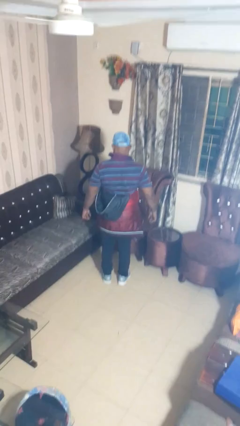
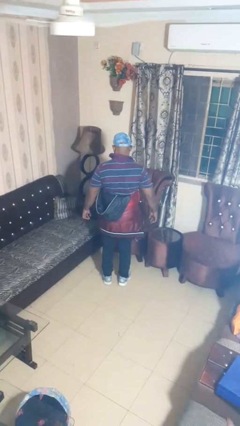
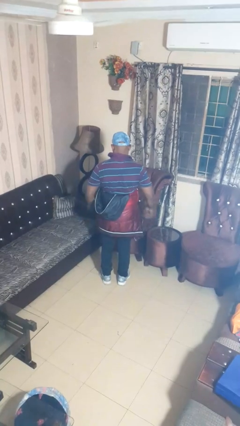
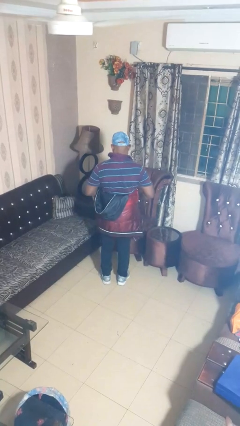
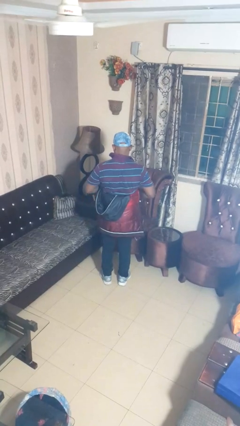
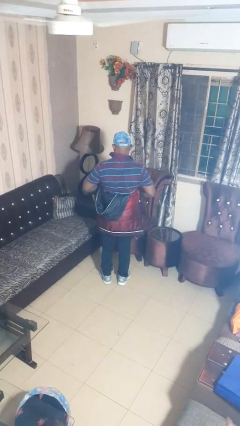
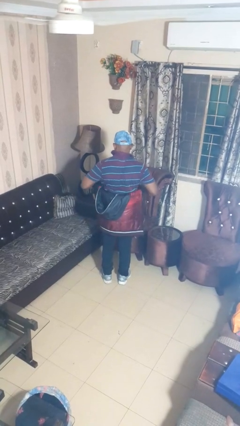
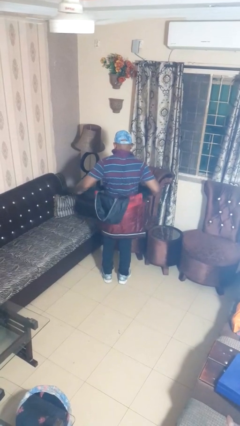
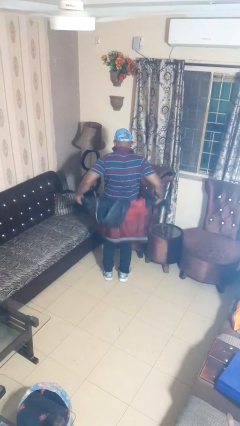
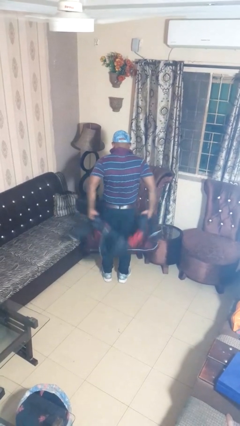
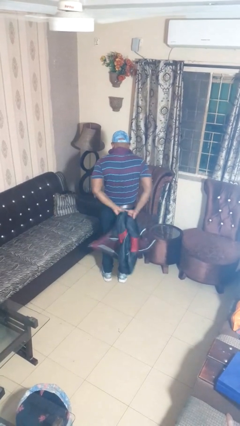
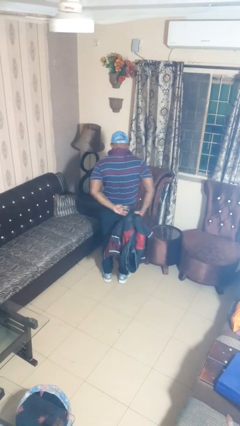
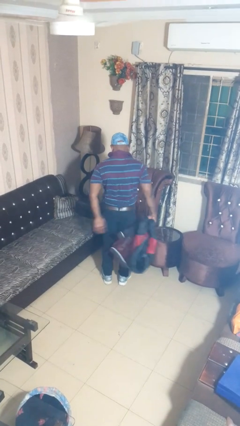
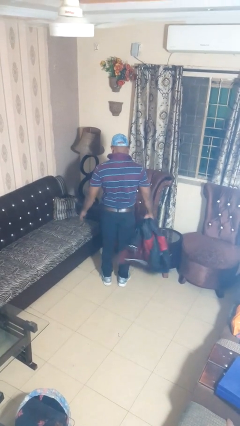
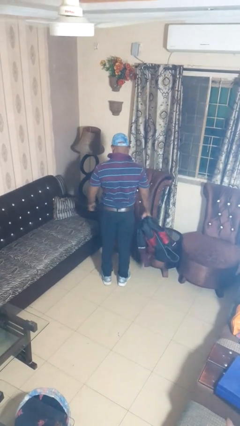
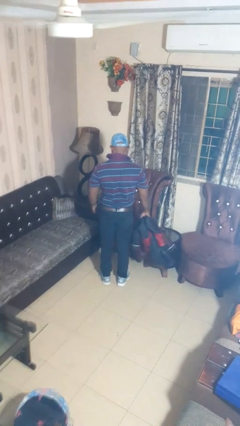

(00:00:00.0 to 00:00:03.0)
person unties jacket around waist

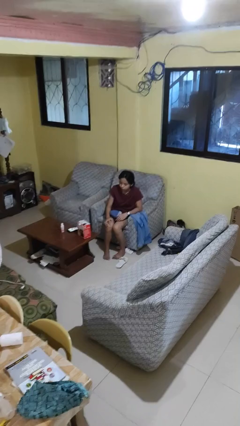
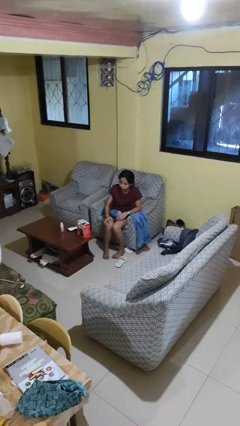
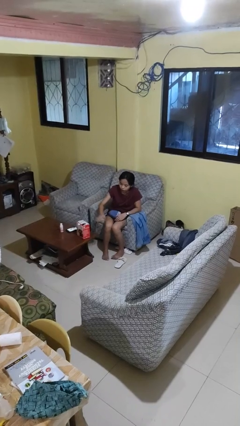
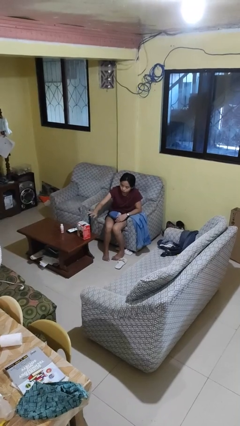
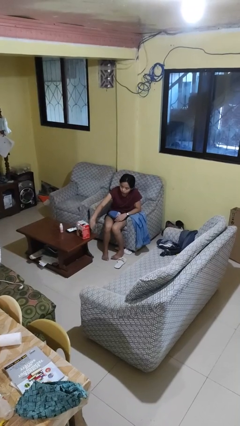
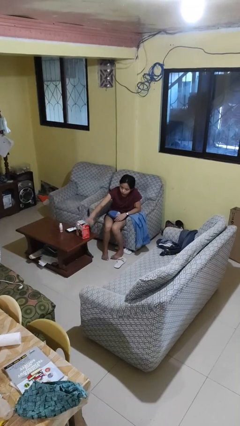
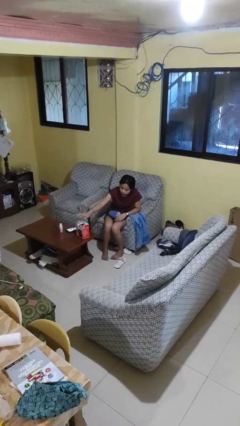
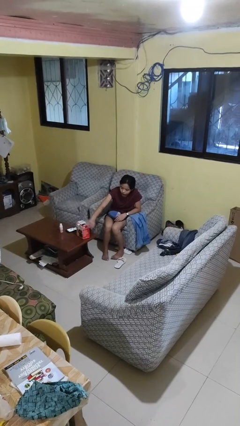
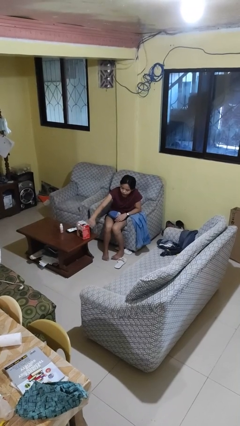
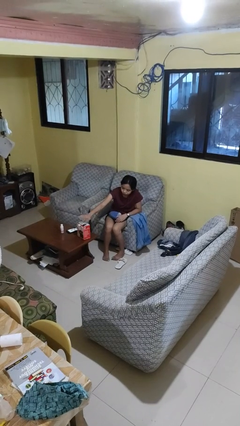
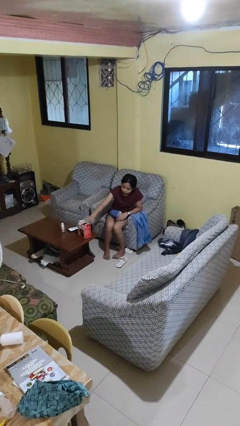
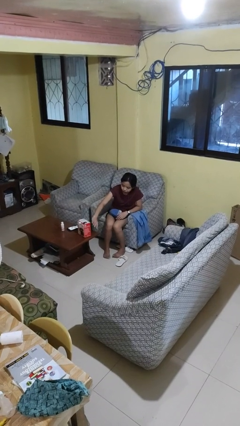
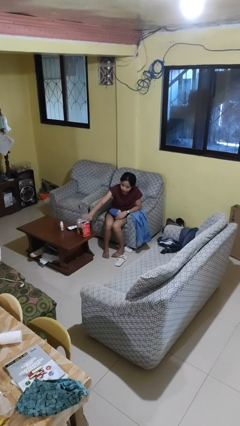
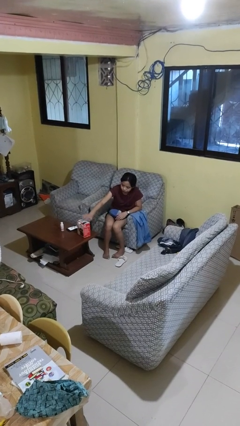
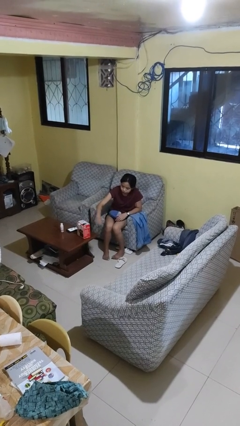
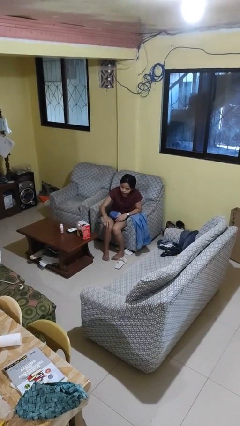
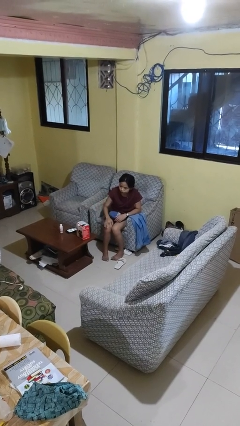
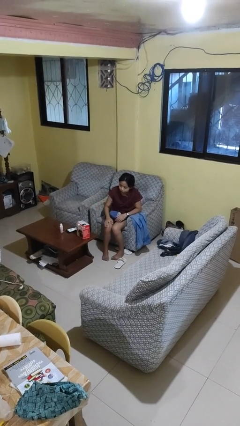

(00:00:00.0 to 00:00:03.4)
person waves hand over object

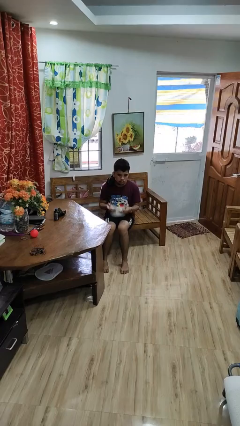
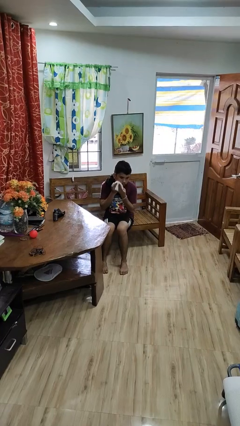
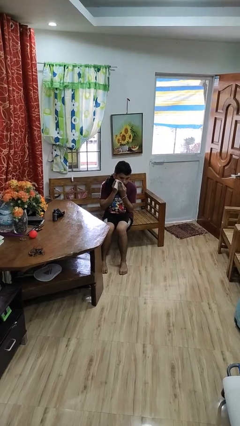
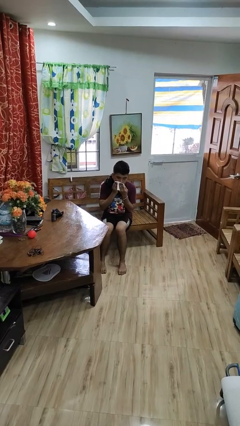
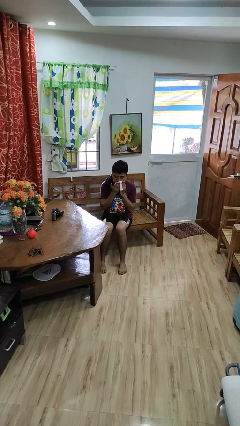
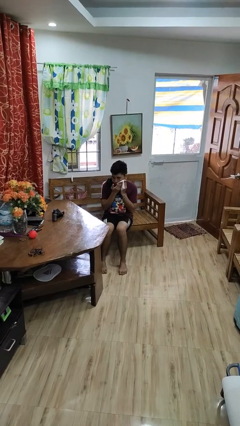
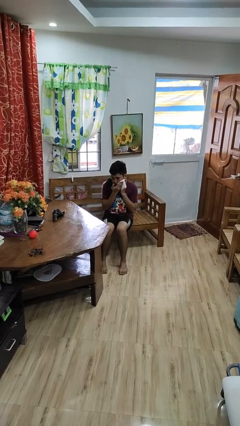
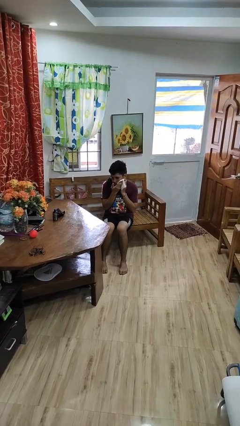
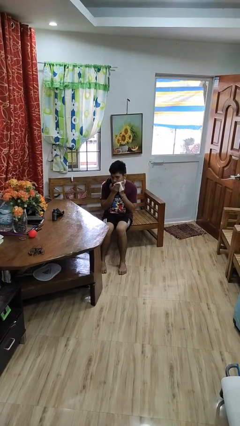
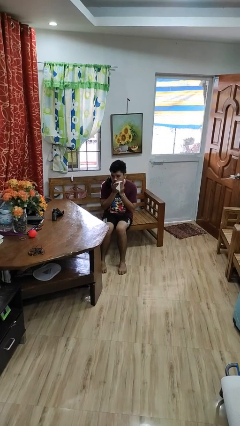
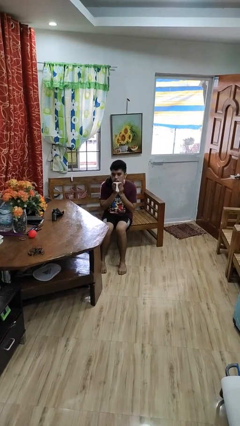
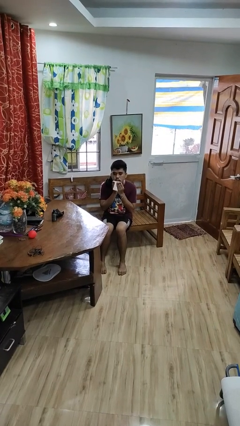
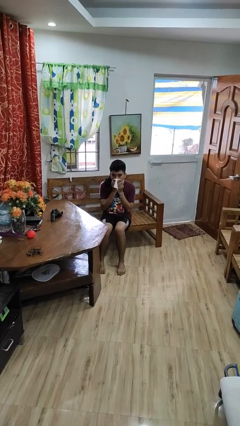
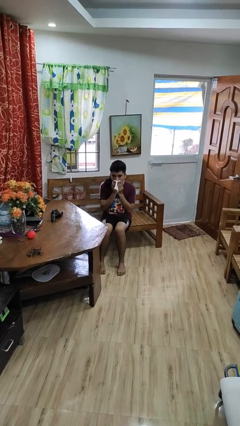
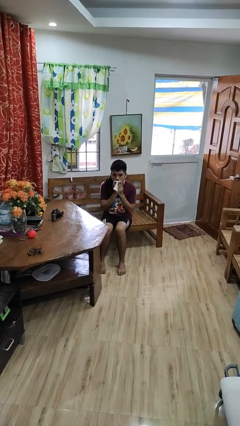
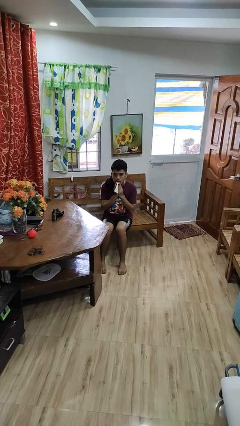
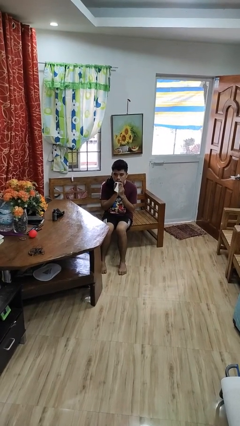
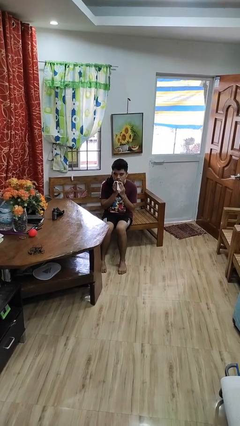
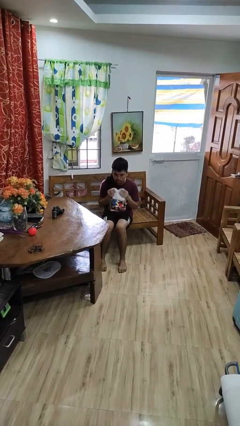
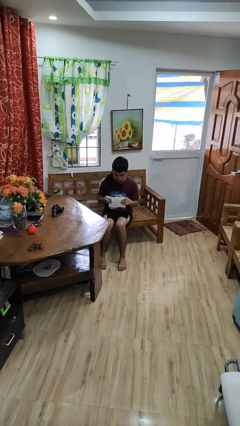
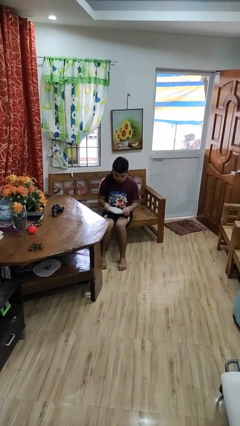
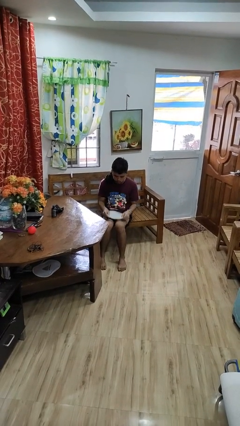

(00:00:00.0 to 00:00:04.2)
person wipes mouth with napkin

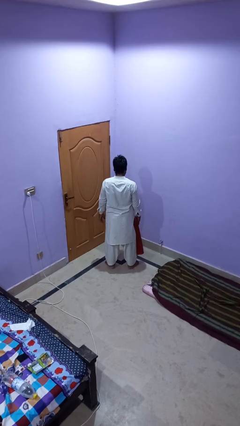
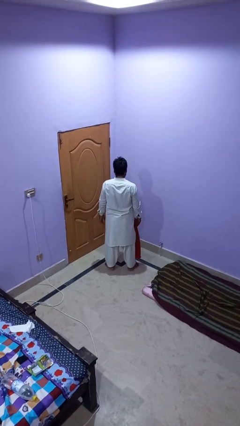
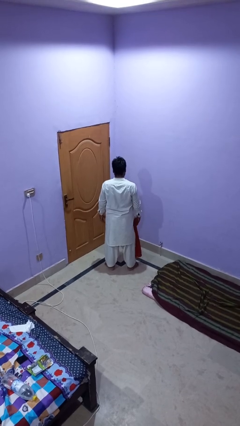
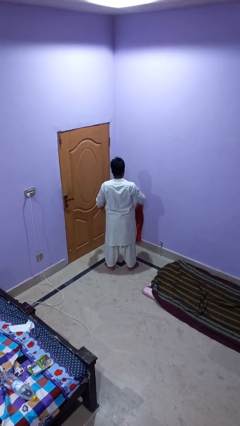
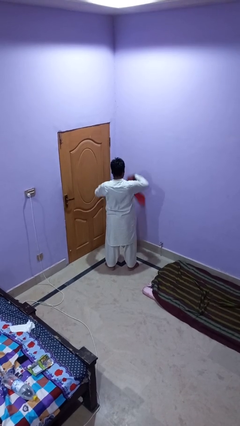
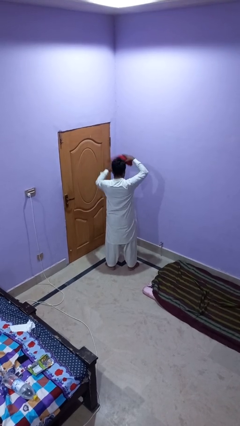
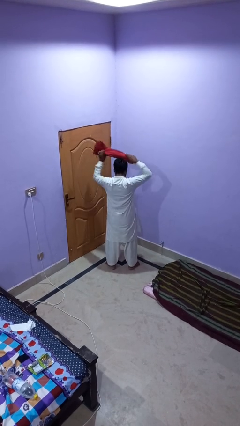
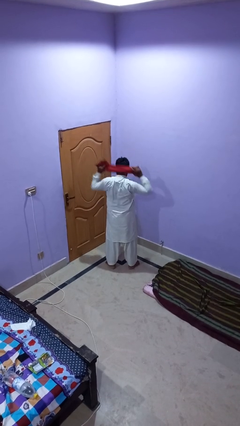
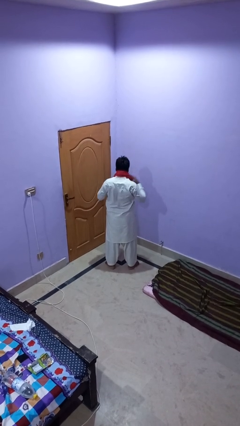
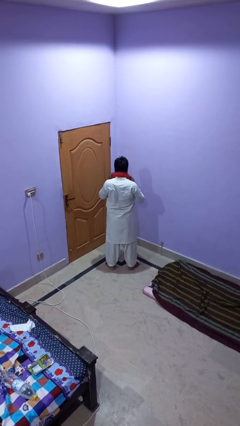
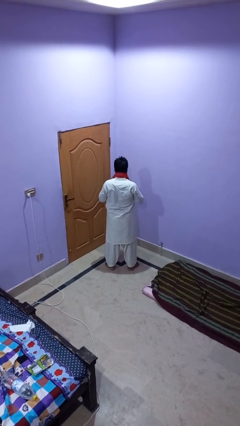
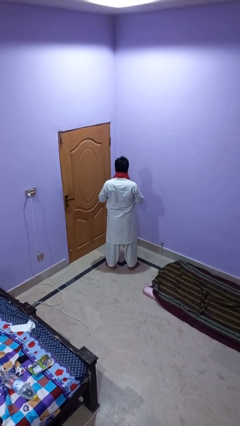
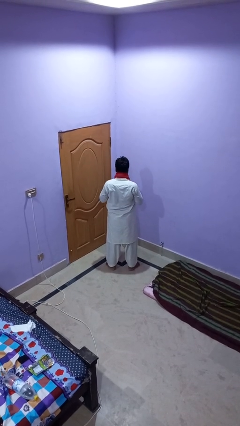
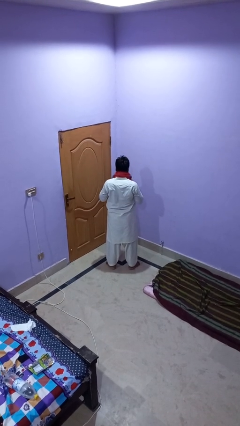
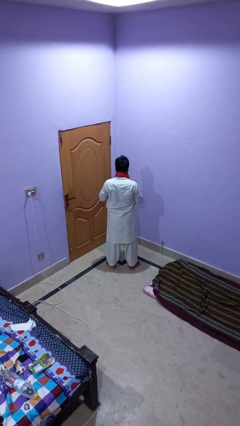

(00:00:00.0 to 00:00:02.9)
person puts on scarf

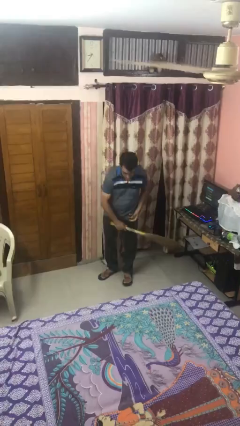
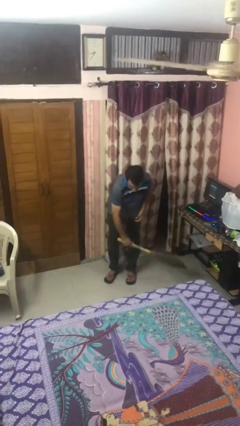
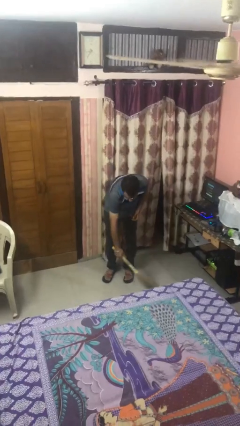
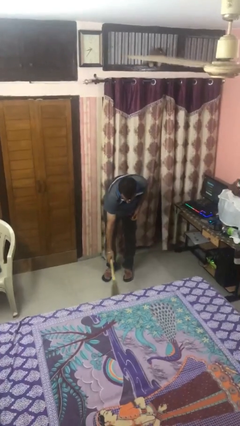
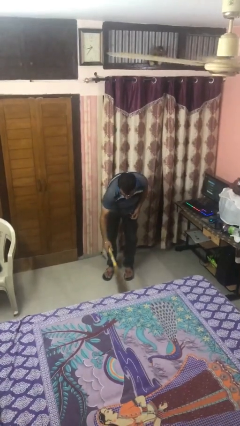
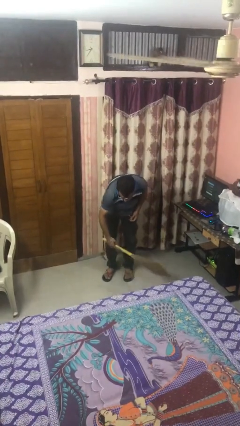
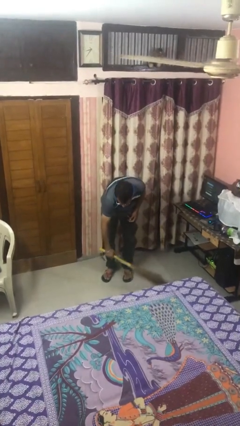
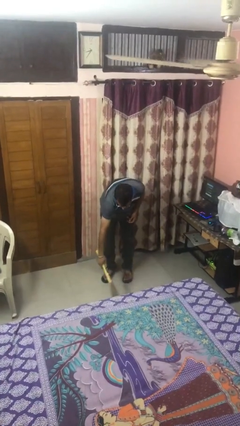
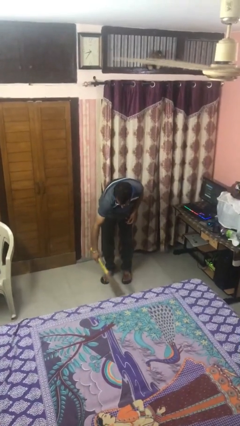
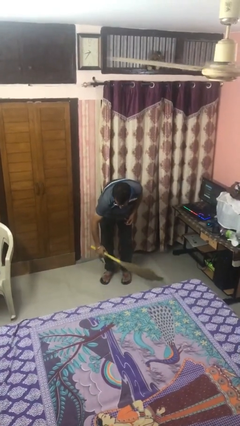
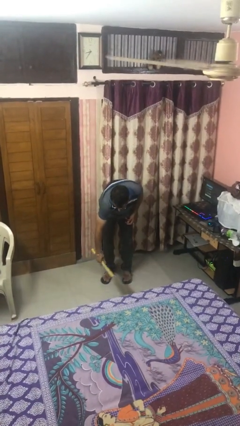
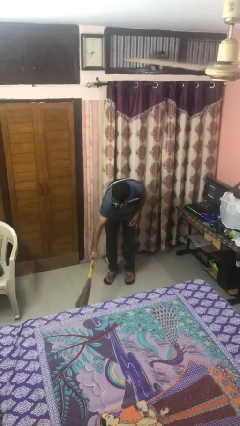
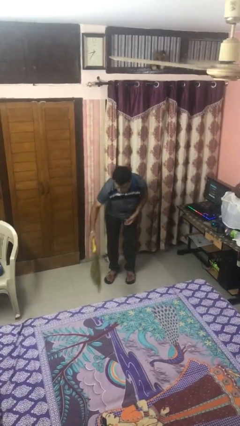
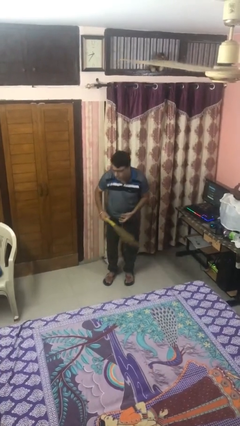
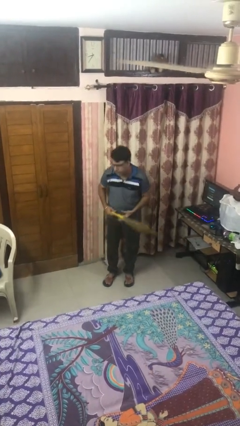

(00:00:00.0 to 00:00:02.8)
person sweeps floor

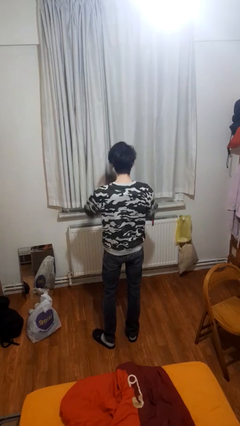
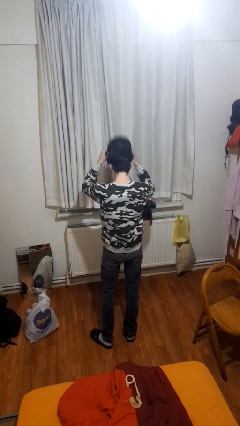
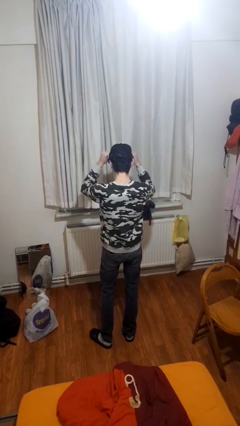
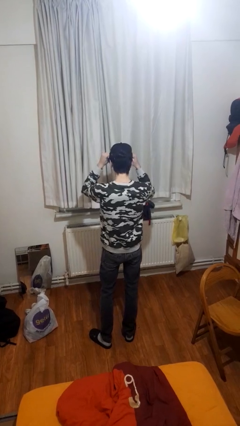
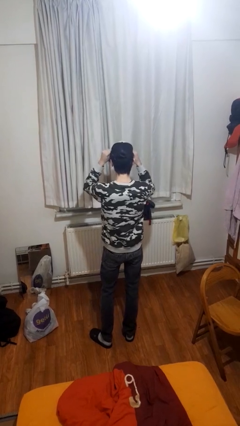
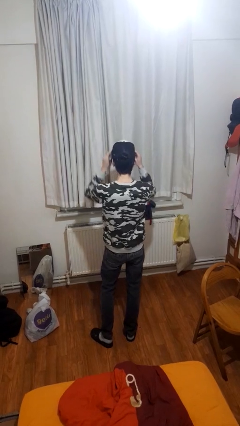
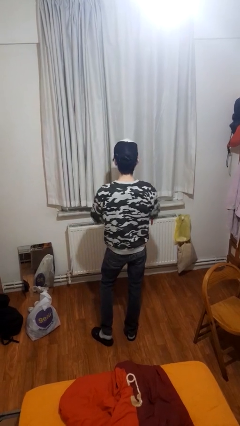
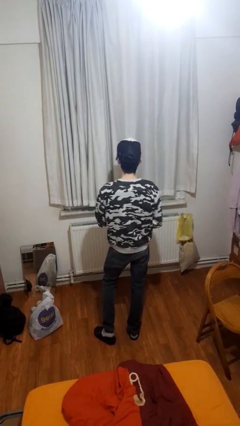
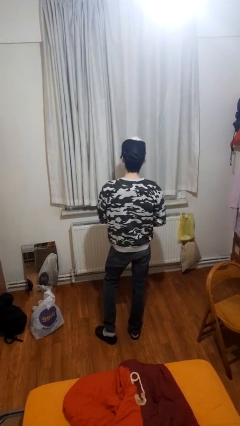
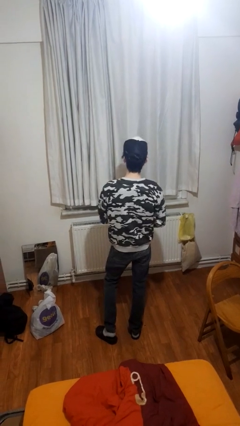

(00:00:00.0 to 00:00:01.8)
person puts on hat
